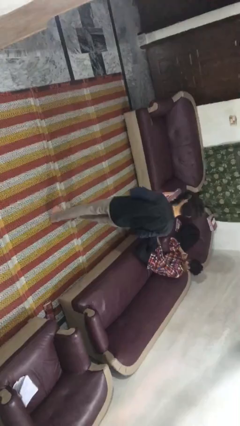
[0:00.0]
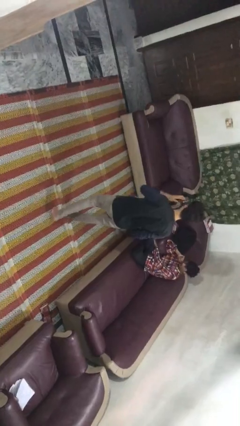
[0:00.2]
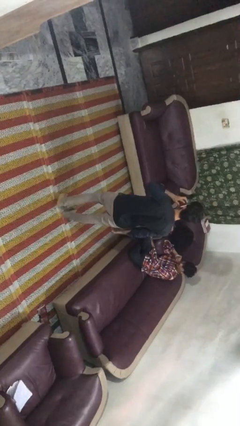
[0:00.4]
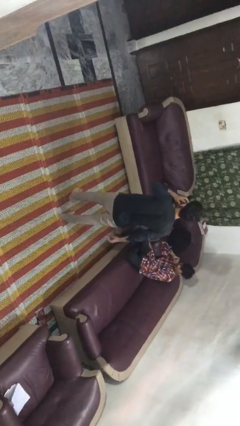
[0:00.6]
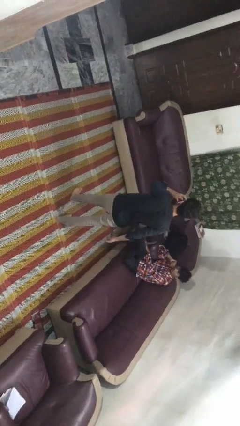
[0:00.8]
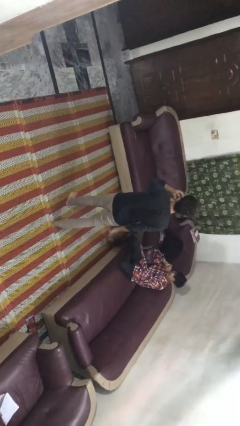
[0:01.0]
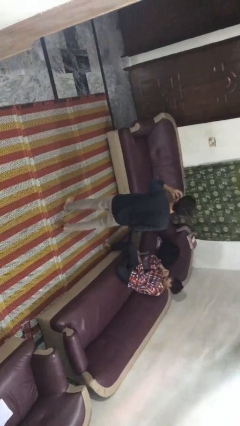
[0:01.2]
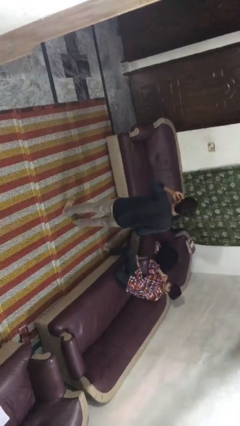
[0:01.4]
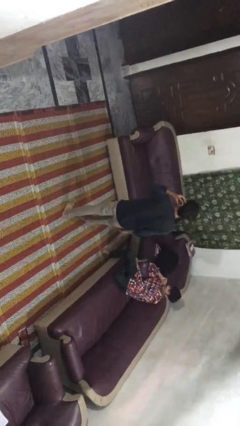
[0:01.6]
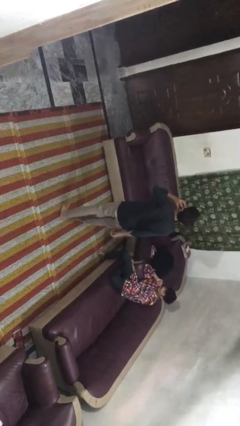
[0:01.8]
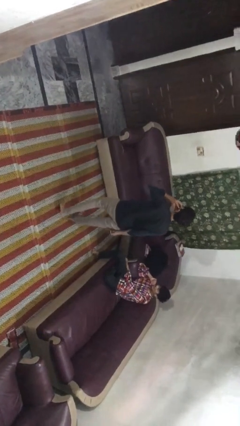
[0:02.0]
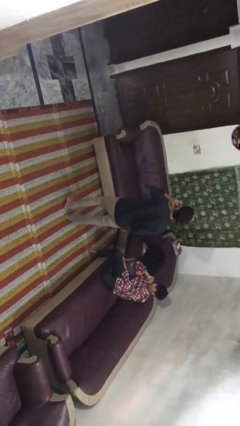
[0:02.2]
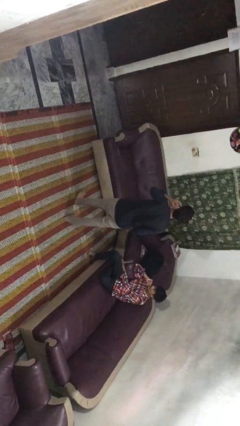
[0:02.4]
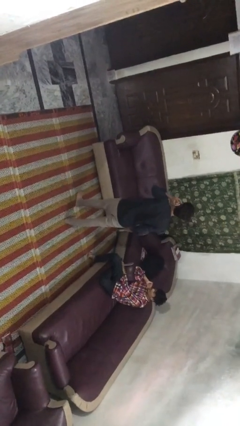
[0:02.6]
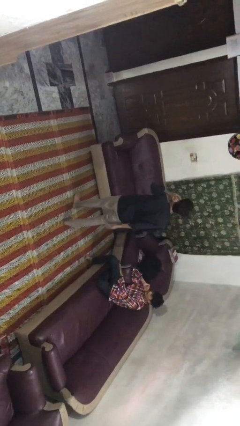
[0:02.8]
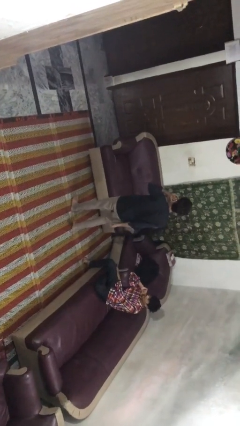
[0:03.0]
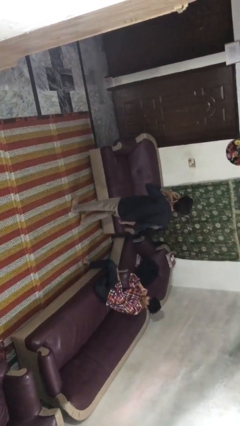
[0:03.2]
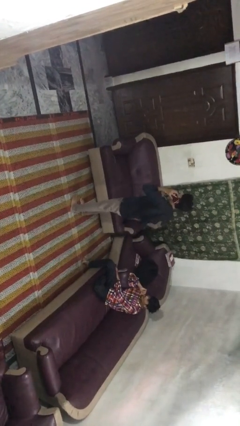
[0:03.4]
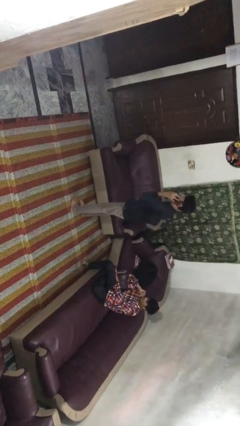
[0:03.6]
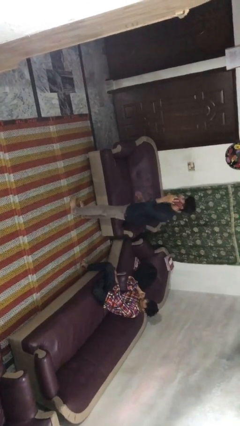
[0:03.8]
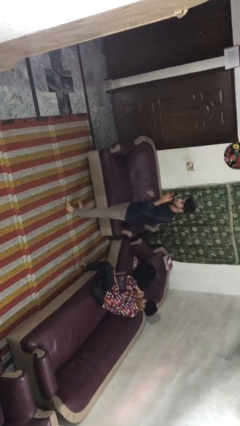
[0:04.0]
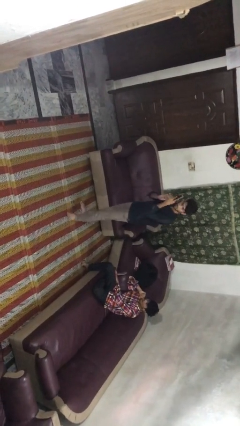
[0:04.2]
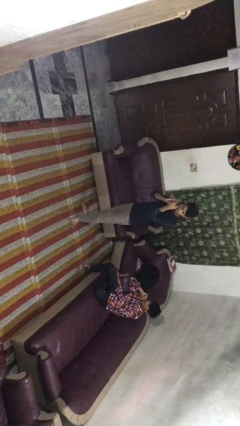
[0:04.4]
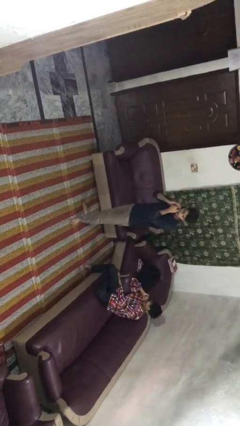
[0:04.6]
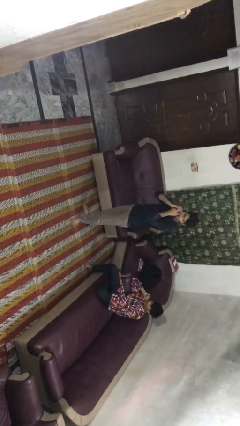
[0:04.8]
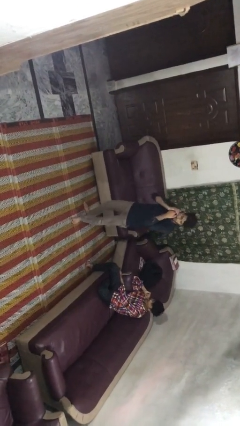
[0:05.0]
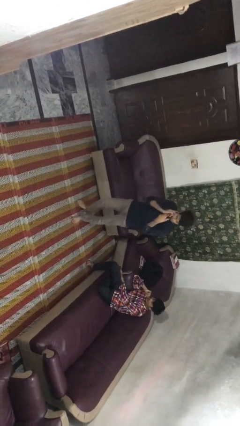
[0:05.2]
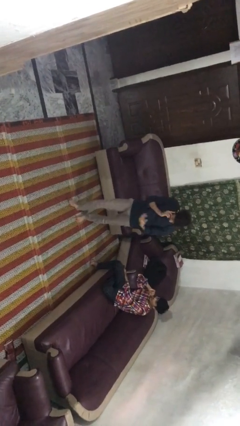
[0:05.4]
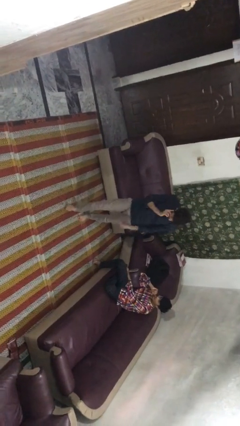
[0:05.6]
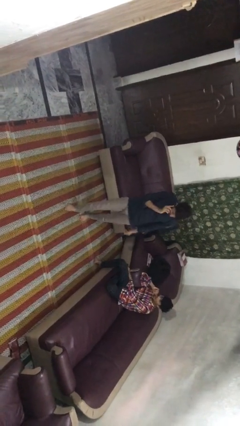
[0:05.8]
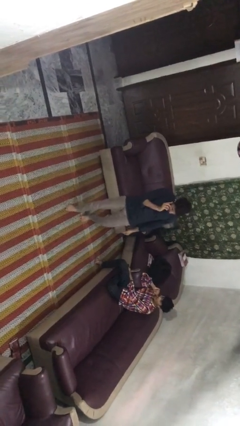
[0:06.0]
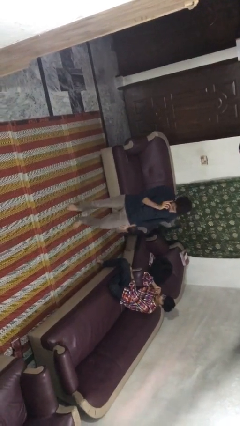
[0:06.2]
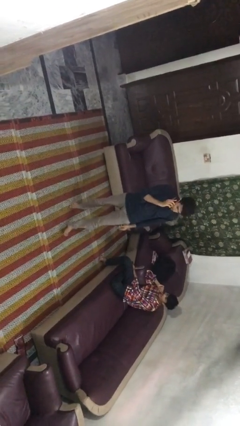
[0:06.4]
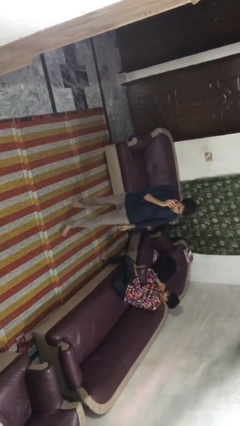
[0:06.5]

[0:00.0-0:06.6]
person talks on phone

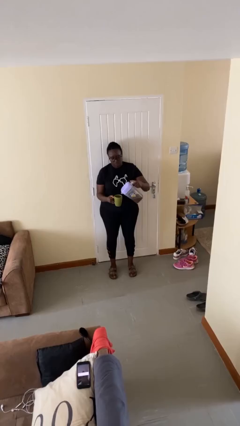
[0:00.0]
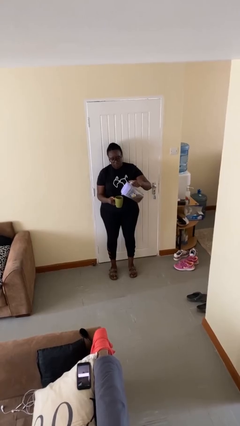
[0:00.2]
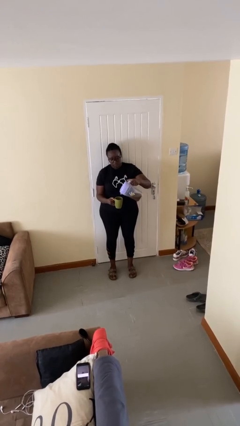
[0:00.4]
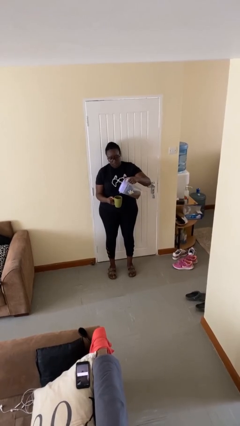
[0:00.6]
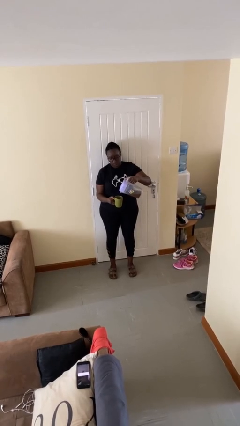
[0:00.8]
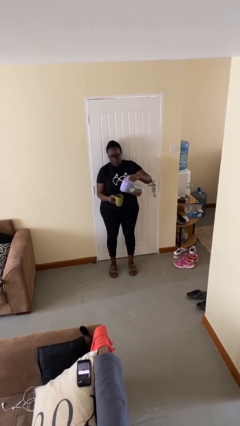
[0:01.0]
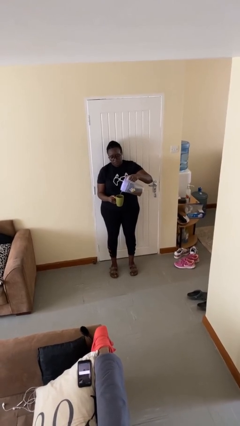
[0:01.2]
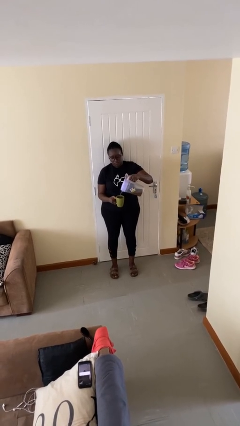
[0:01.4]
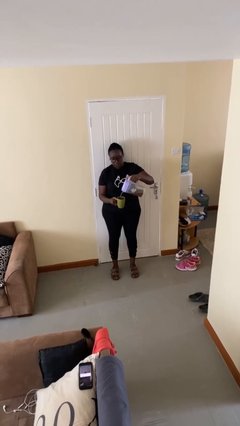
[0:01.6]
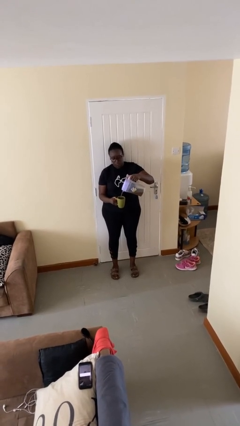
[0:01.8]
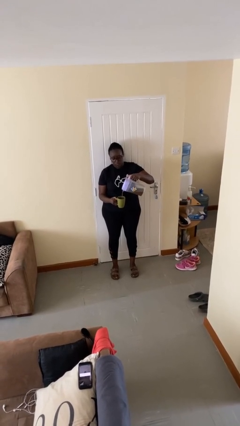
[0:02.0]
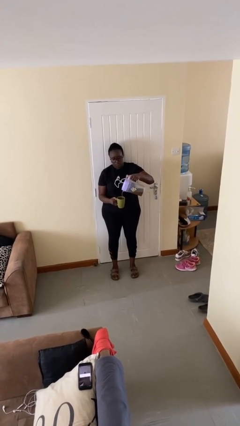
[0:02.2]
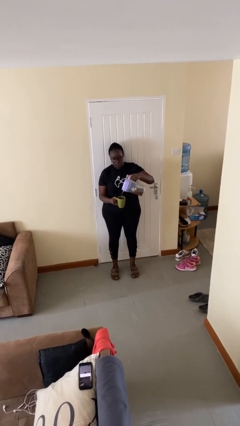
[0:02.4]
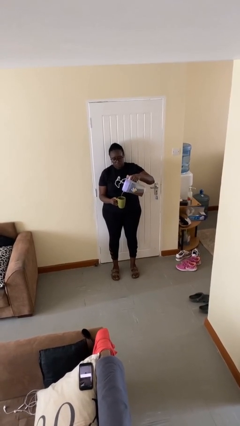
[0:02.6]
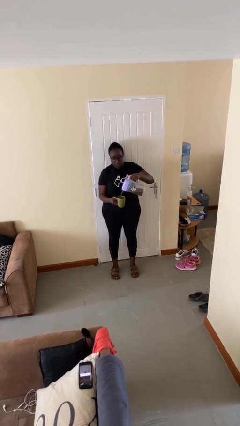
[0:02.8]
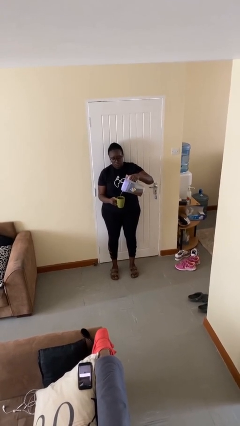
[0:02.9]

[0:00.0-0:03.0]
person pours coffee into mug

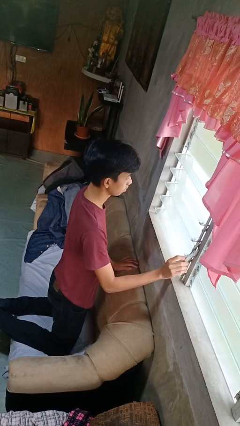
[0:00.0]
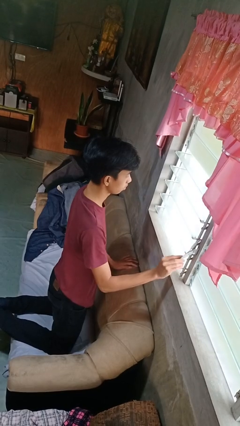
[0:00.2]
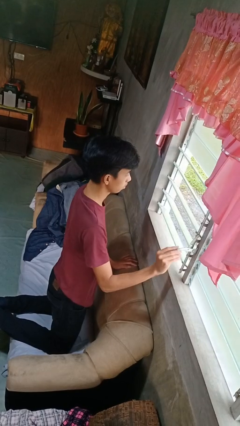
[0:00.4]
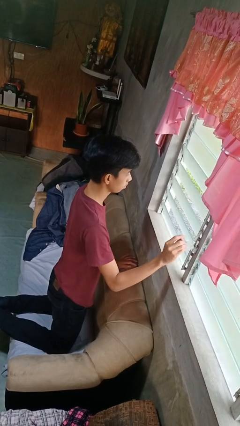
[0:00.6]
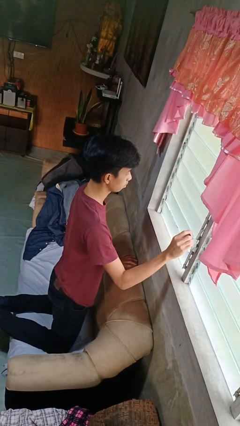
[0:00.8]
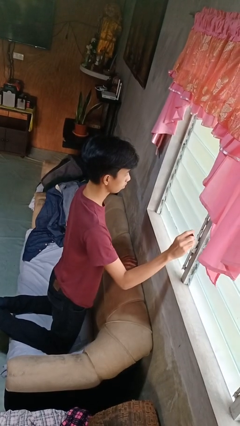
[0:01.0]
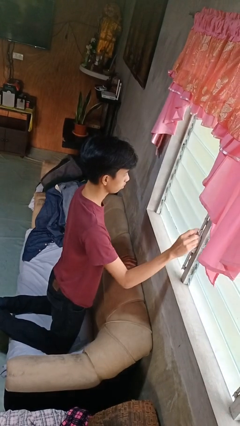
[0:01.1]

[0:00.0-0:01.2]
person closes home window

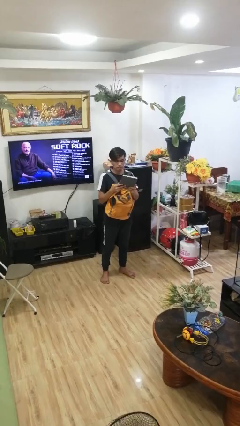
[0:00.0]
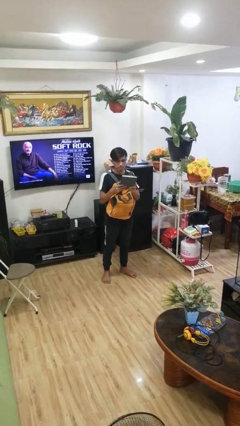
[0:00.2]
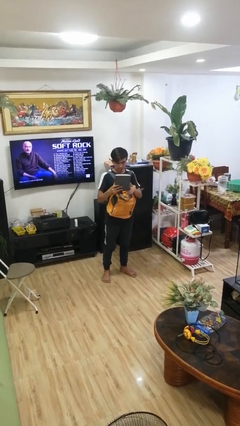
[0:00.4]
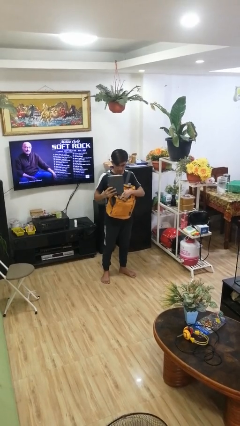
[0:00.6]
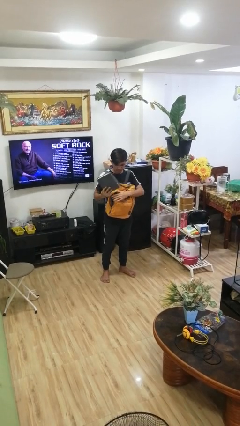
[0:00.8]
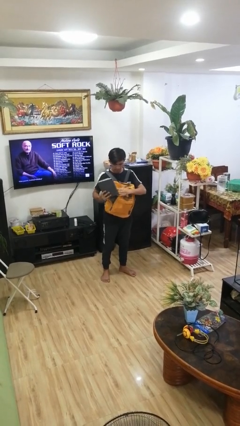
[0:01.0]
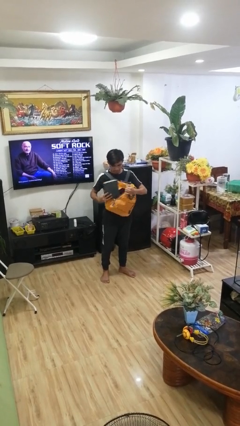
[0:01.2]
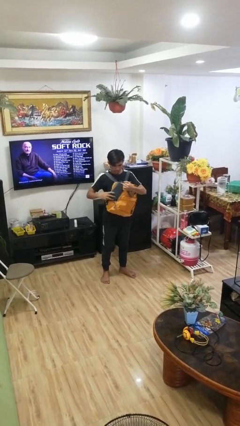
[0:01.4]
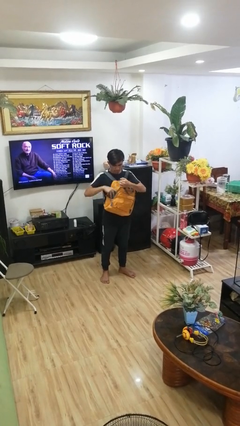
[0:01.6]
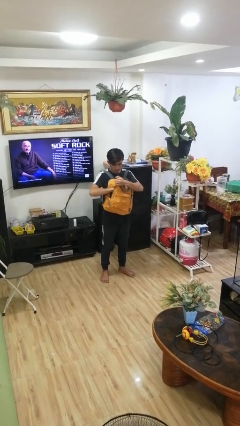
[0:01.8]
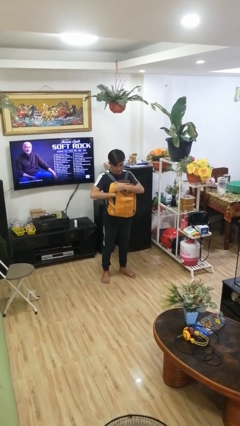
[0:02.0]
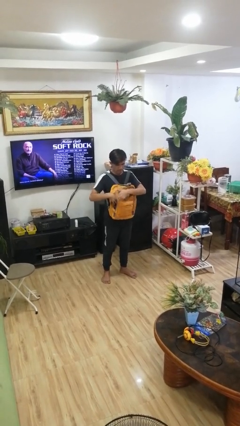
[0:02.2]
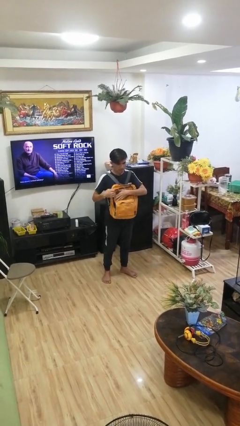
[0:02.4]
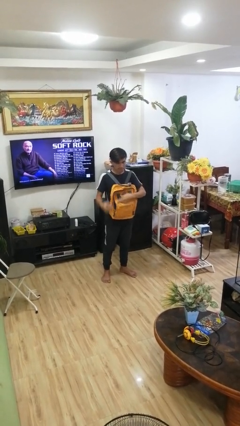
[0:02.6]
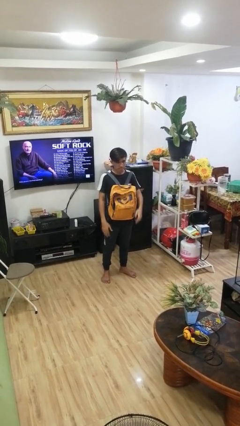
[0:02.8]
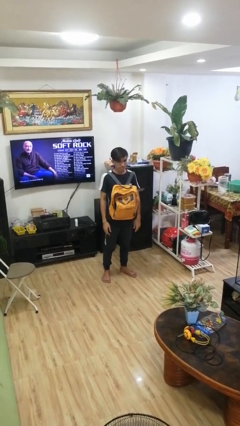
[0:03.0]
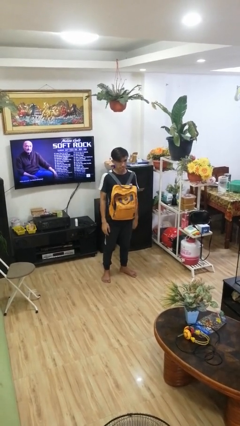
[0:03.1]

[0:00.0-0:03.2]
person puts object into backpack

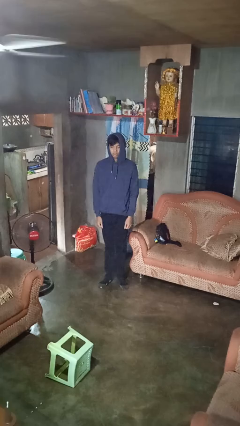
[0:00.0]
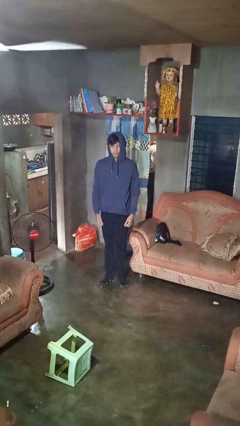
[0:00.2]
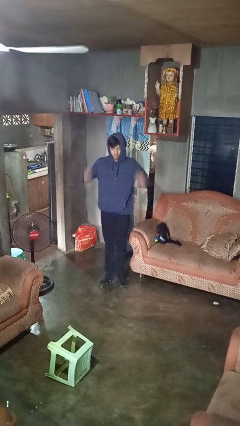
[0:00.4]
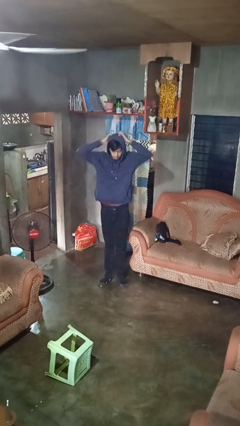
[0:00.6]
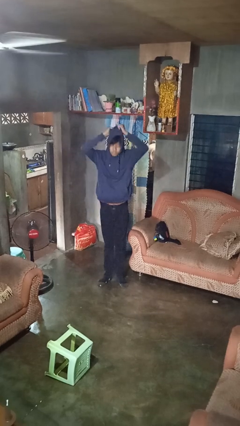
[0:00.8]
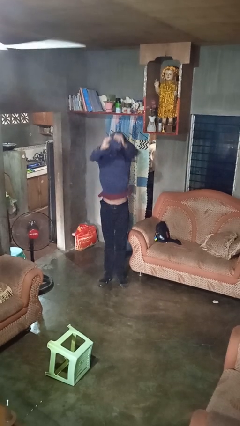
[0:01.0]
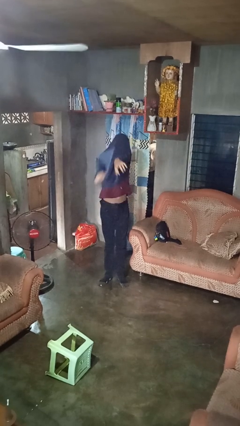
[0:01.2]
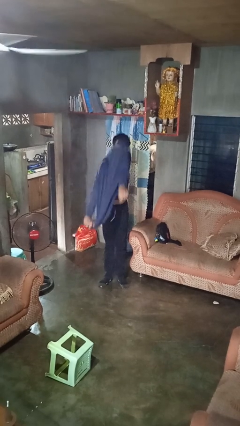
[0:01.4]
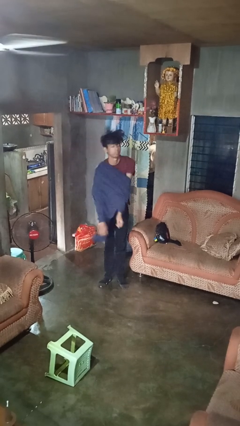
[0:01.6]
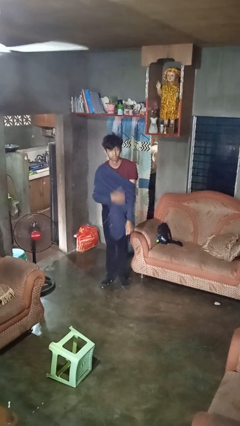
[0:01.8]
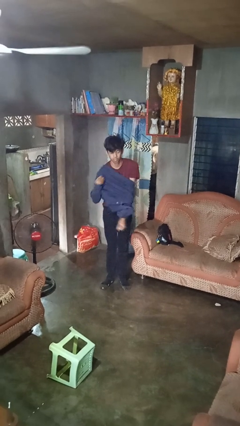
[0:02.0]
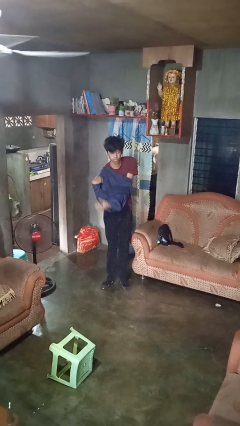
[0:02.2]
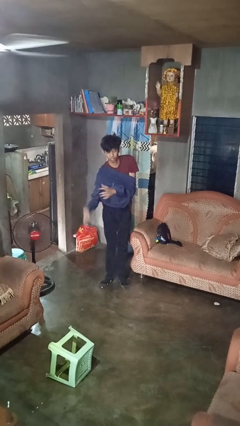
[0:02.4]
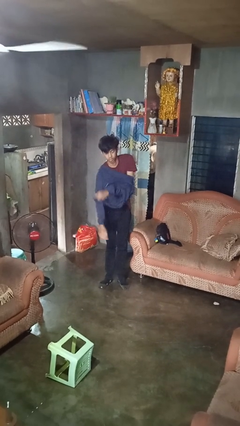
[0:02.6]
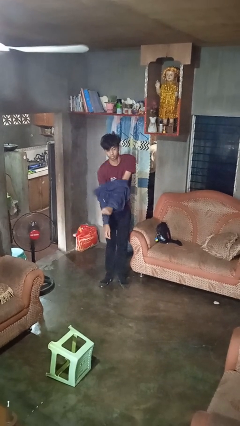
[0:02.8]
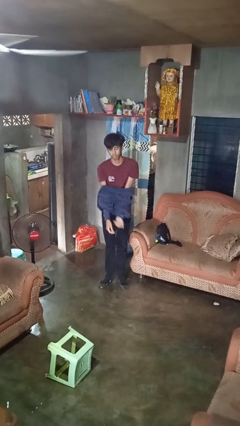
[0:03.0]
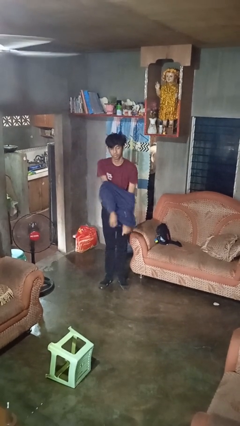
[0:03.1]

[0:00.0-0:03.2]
person takes off hoodie

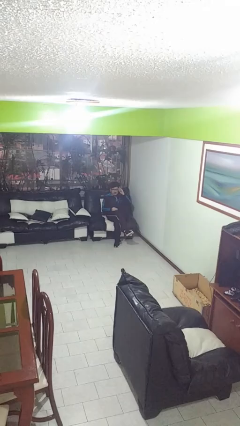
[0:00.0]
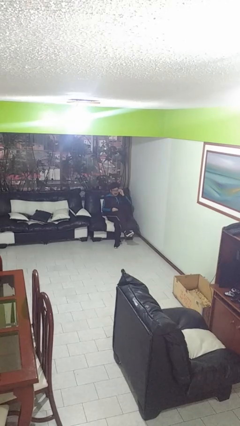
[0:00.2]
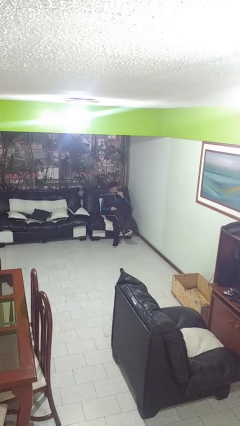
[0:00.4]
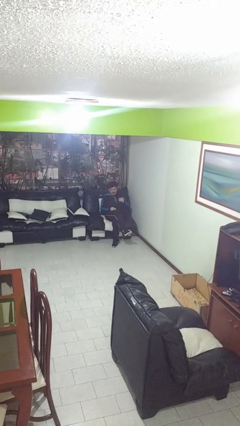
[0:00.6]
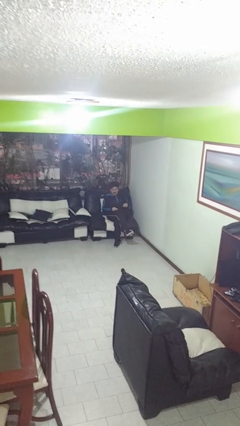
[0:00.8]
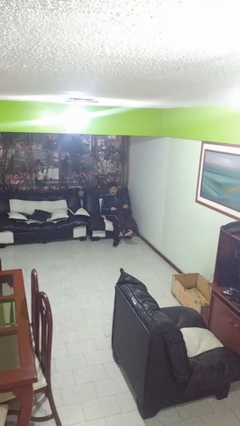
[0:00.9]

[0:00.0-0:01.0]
person takes off glasses
